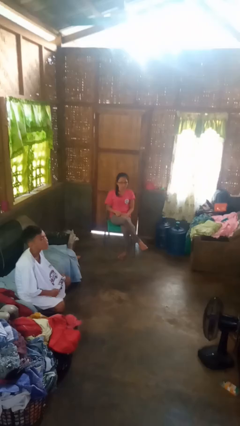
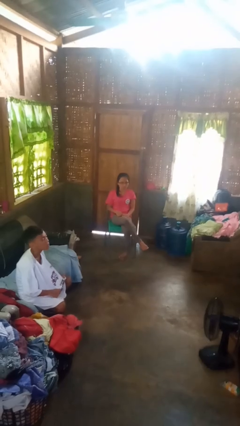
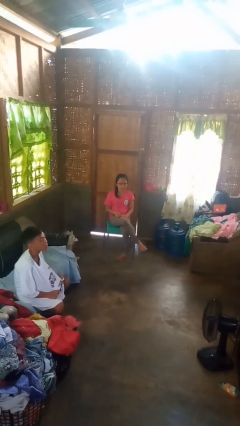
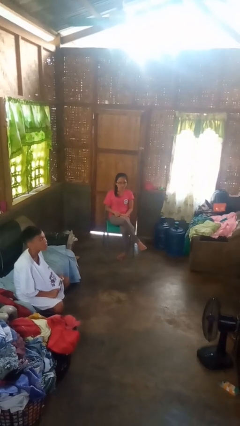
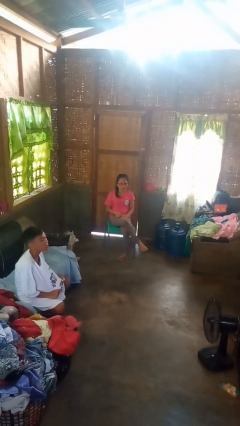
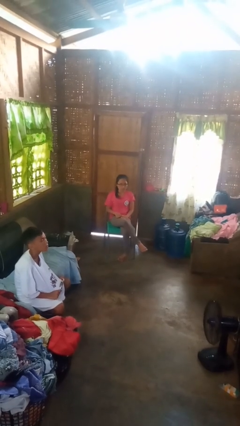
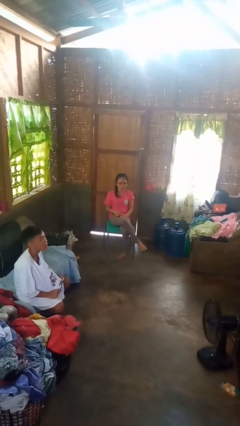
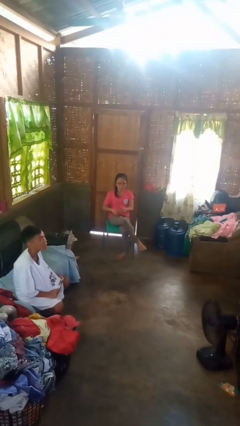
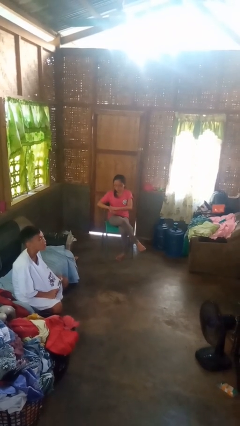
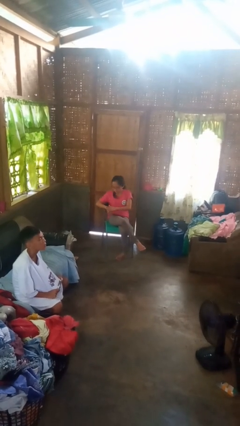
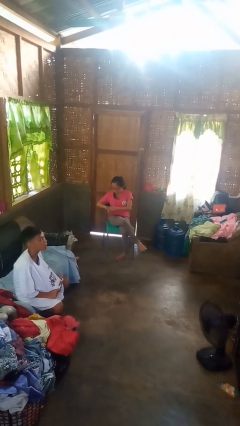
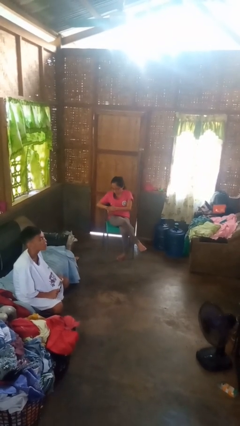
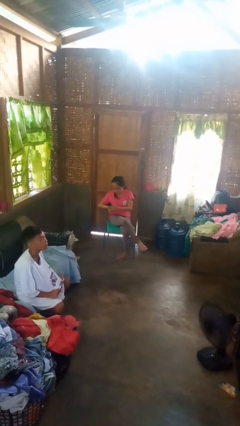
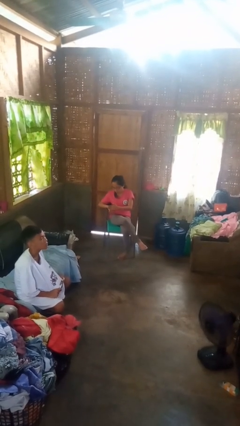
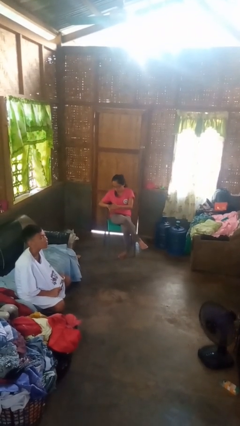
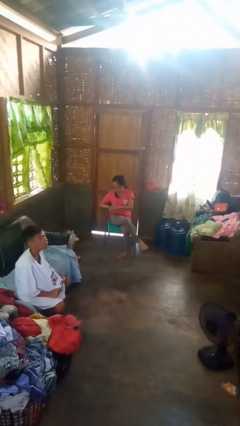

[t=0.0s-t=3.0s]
person swats bug

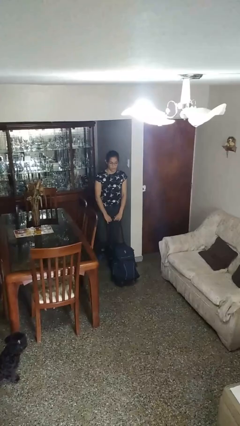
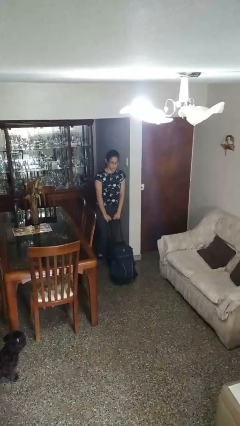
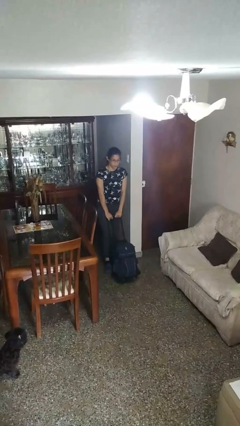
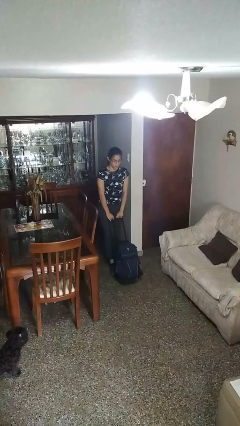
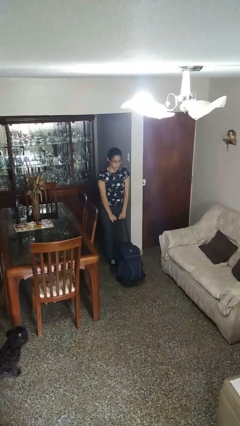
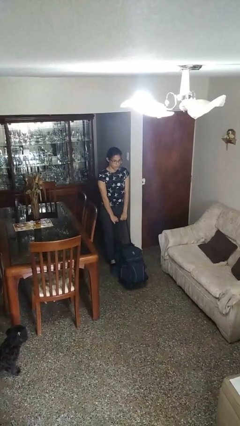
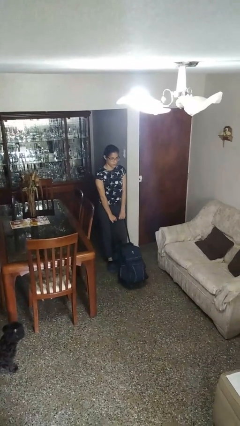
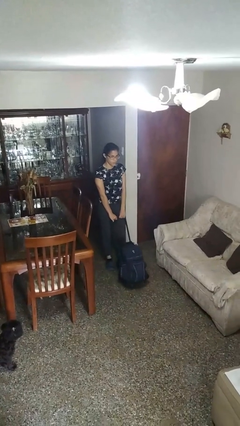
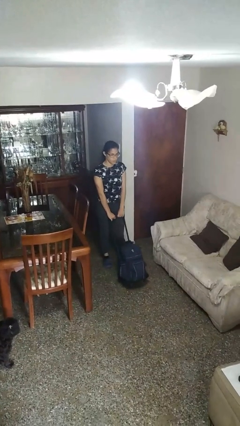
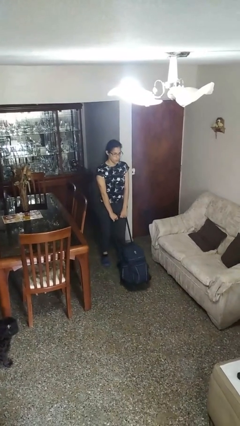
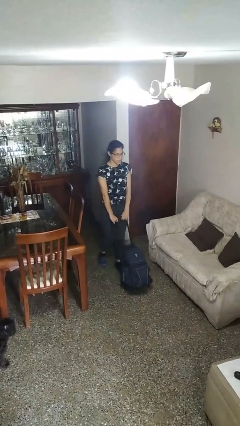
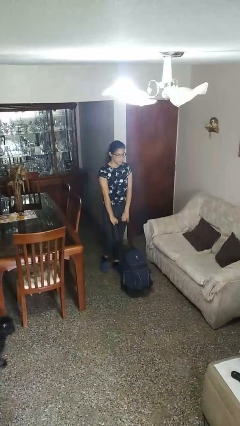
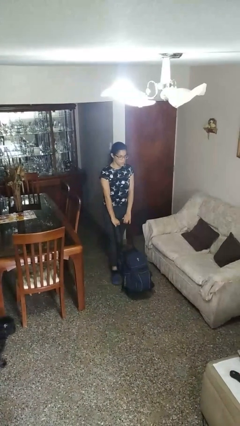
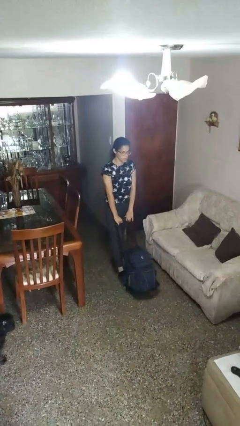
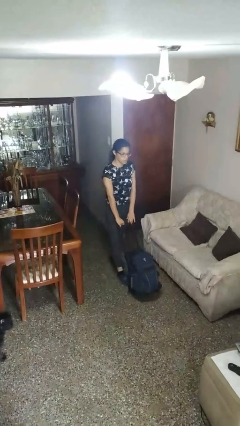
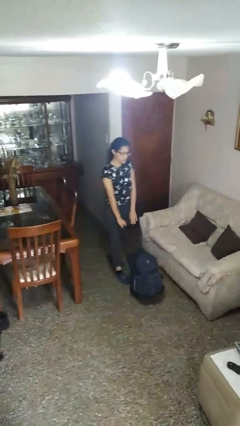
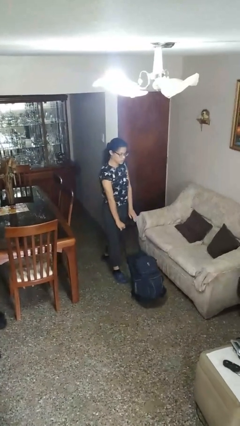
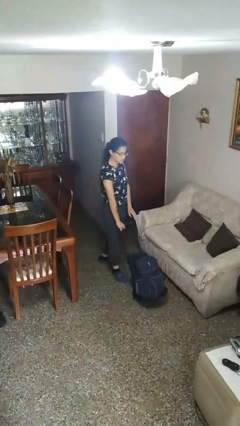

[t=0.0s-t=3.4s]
person pushes wheeled cart

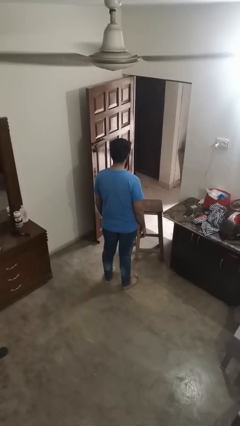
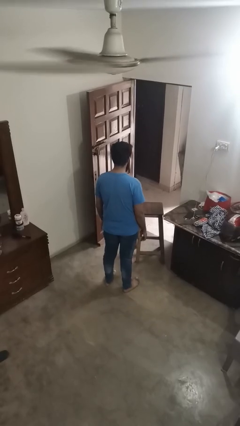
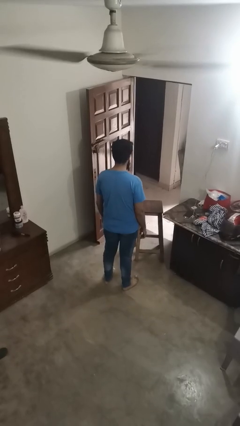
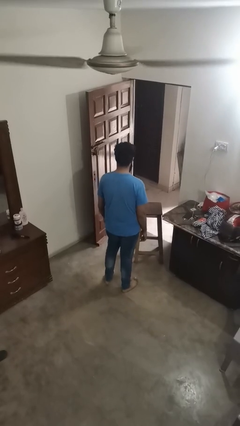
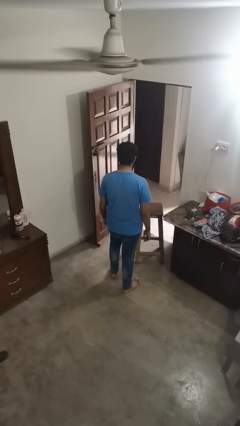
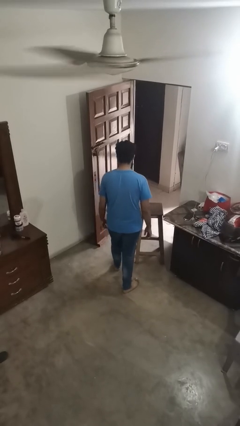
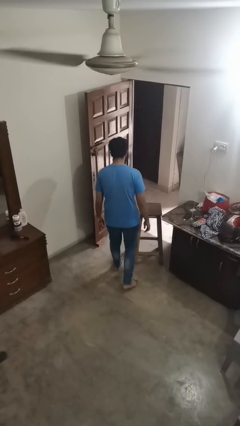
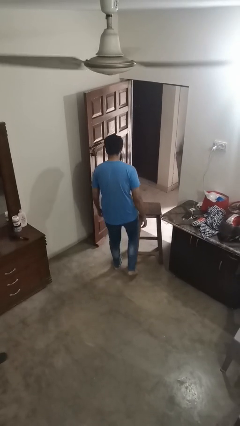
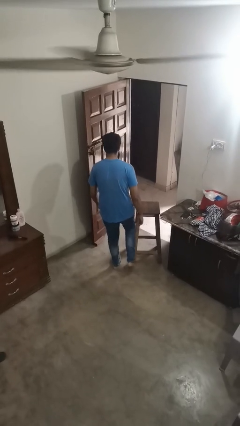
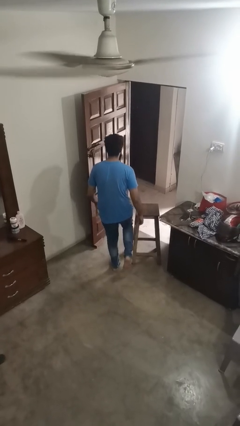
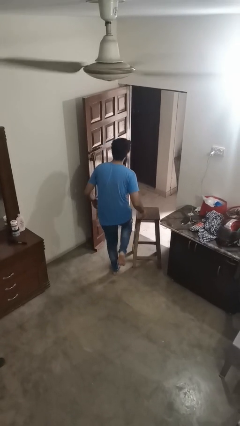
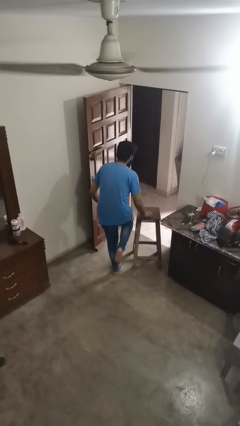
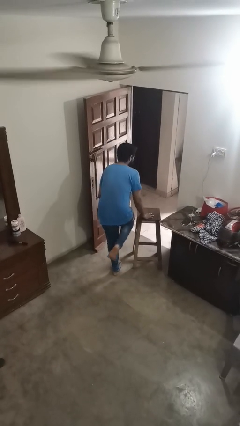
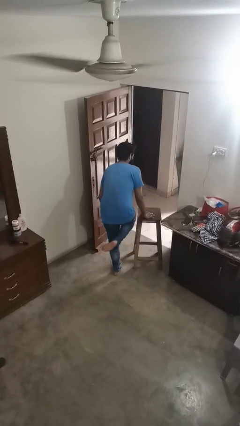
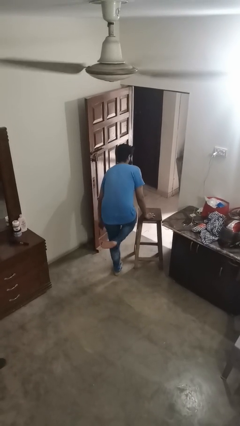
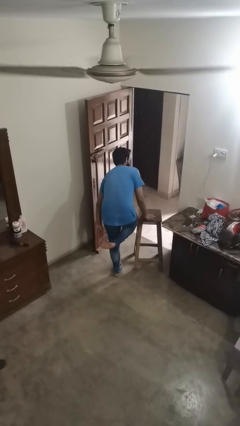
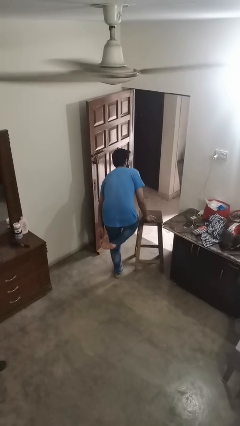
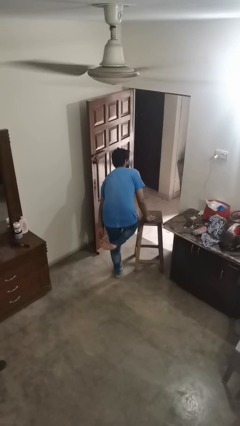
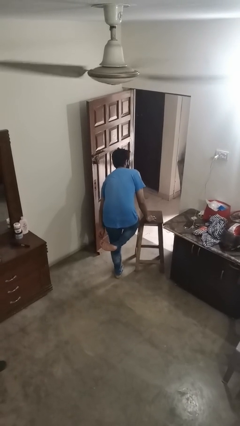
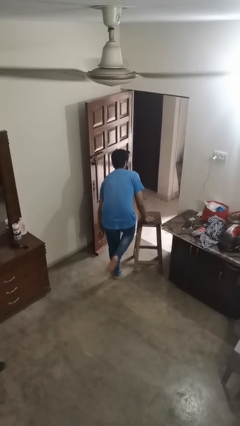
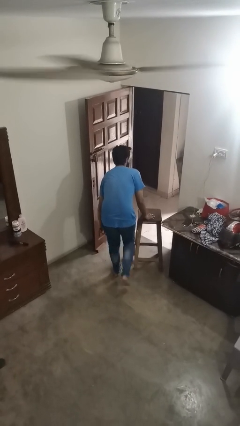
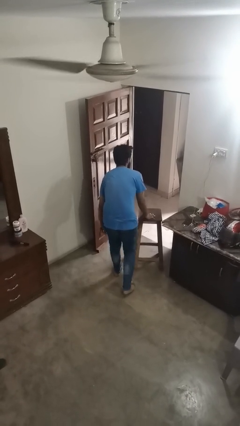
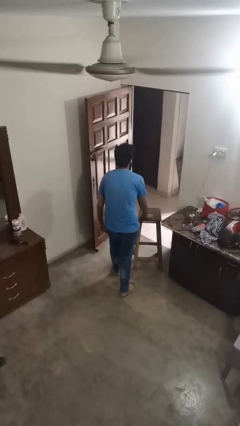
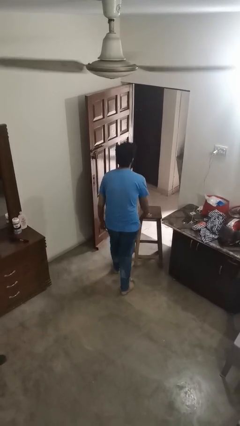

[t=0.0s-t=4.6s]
person stubs toe

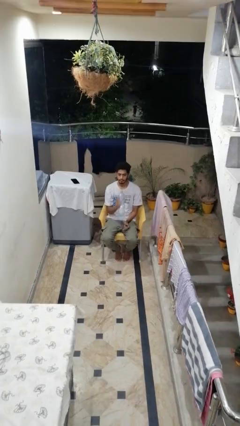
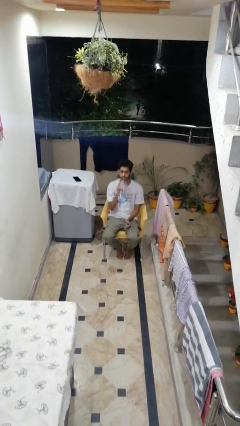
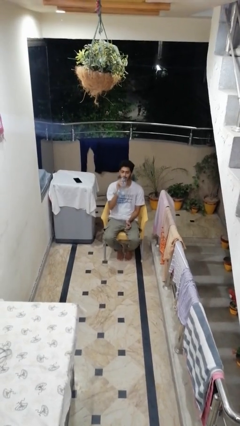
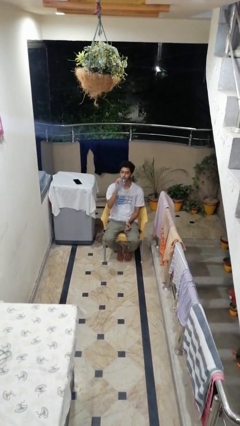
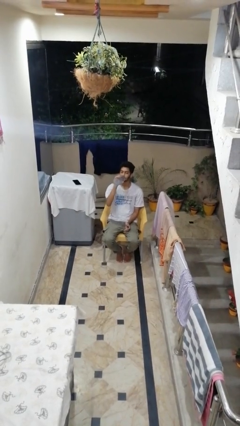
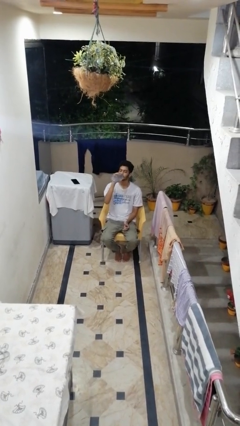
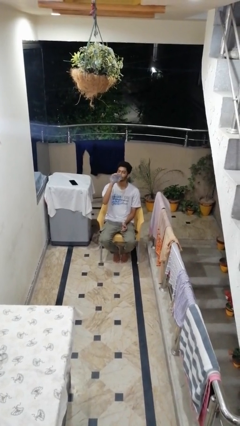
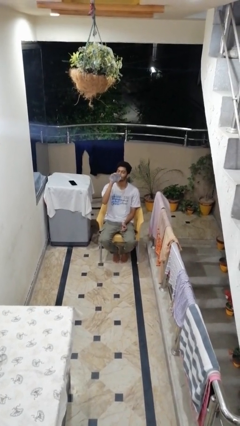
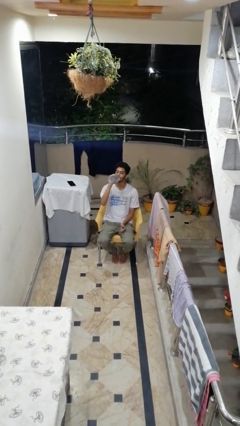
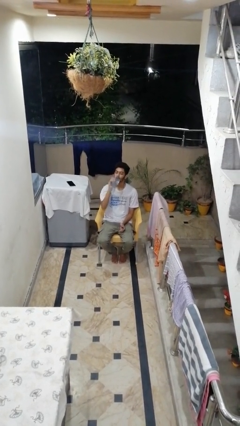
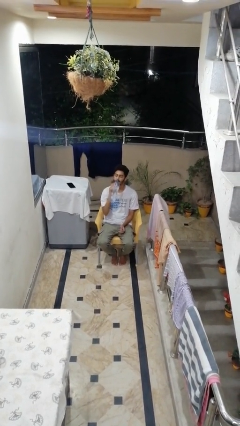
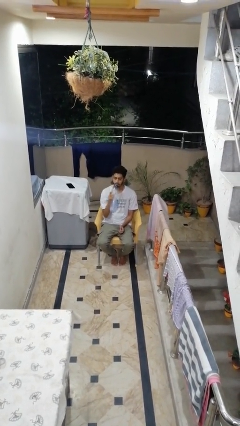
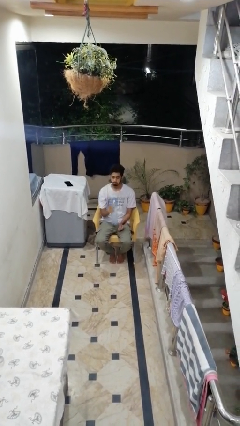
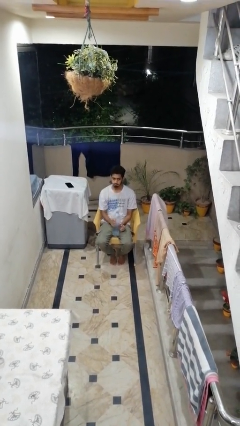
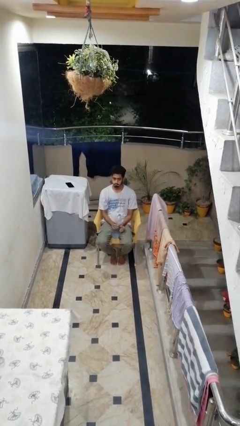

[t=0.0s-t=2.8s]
person drinks from bottle

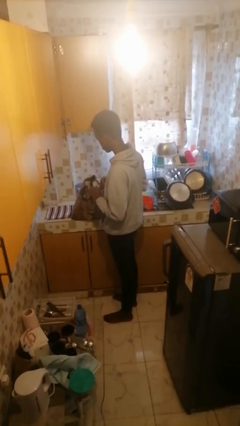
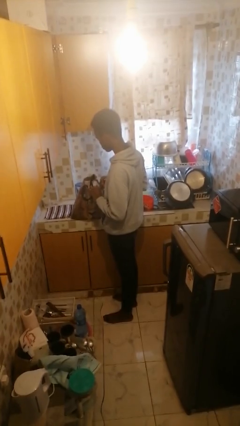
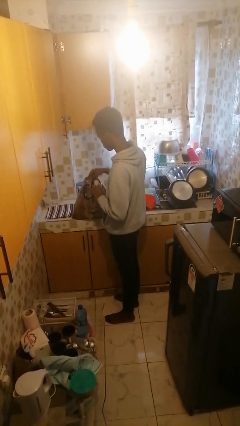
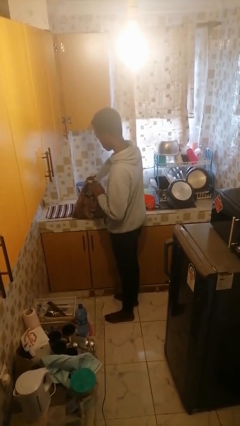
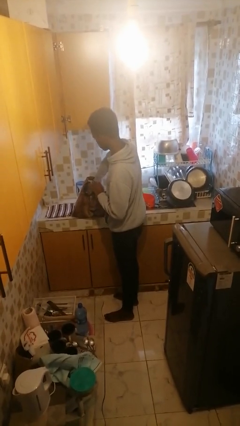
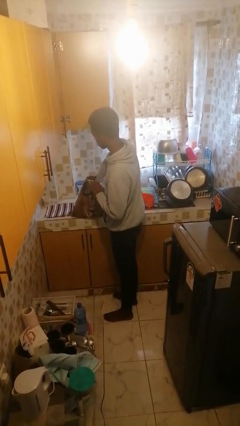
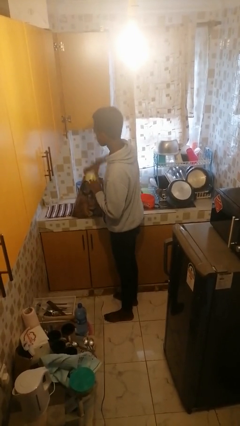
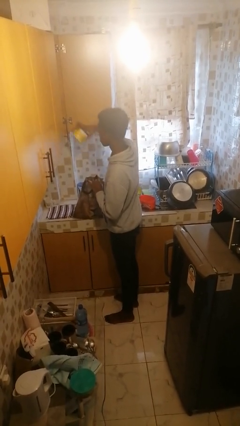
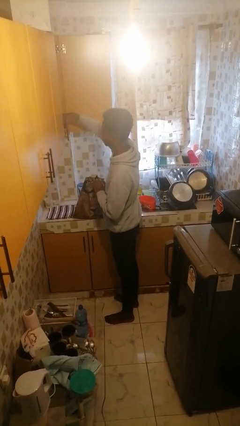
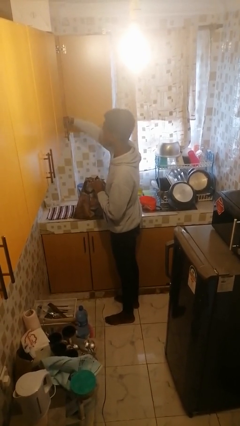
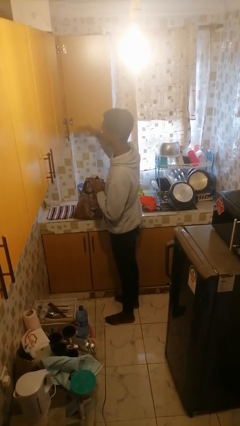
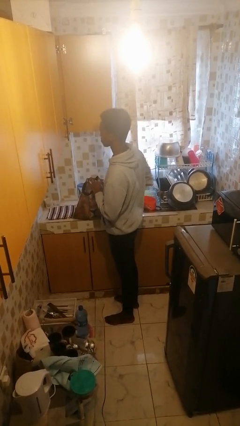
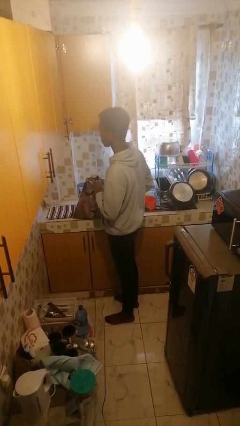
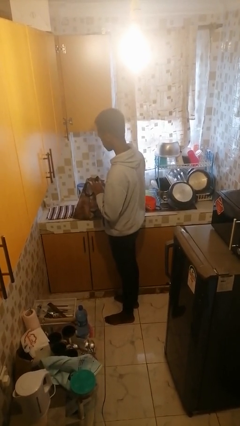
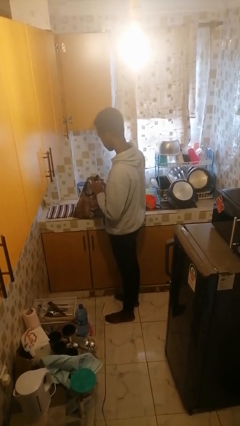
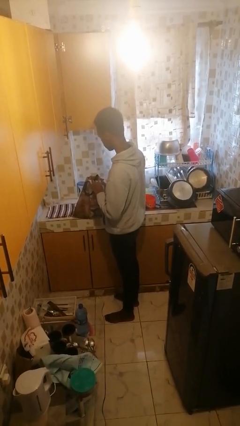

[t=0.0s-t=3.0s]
person loads groceries into cabinet

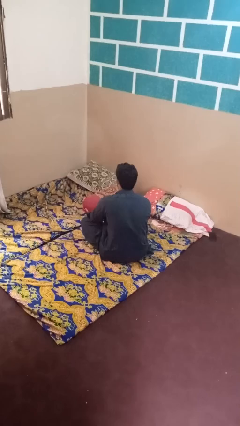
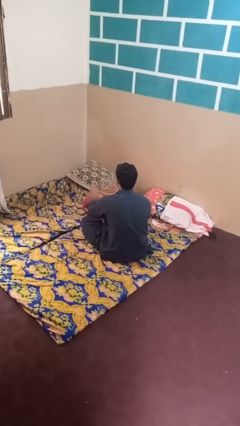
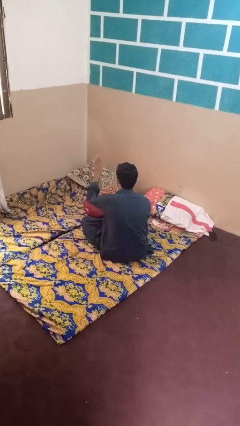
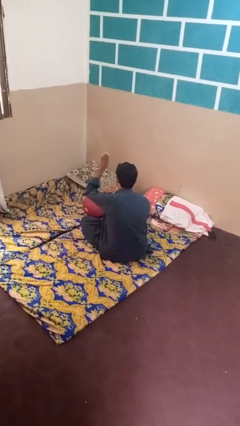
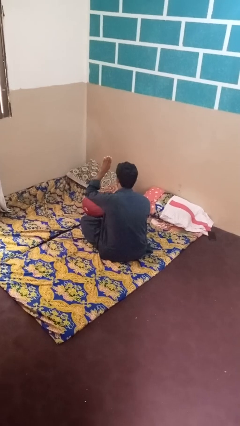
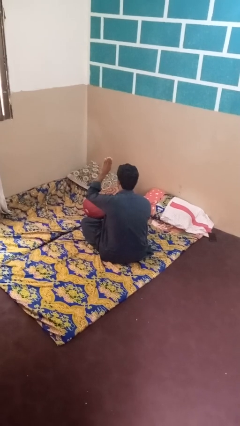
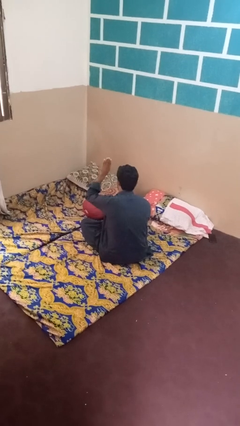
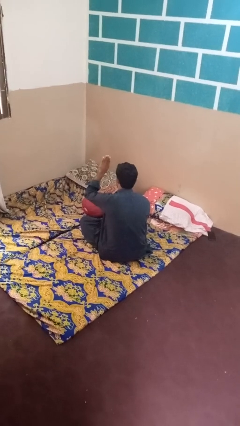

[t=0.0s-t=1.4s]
person gestures number four
